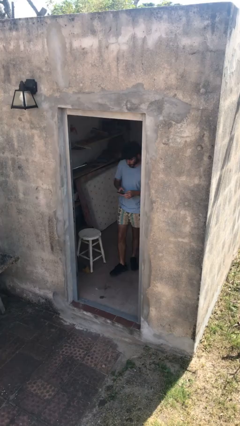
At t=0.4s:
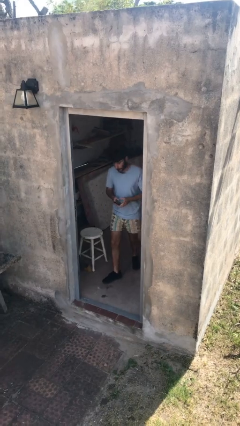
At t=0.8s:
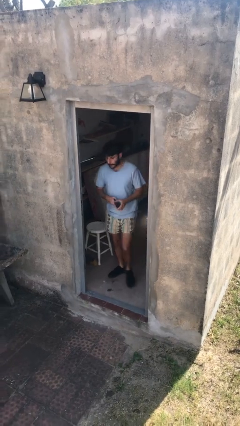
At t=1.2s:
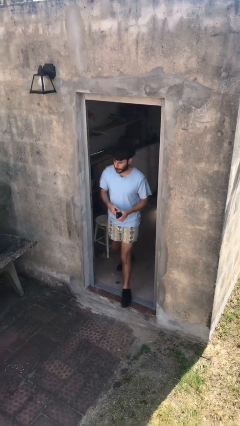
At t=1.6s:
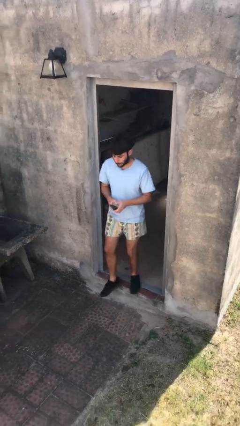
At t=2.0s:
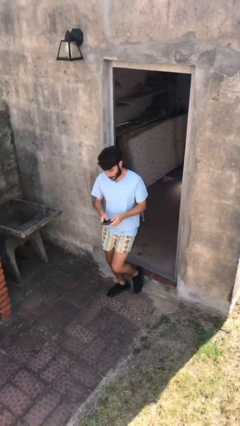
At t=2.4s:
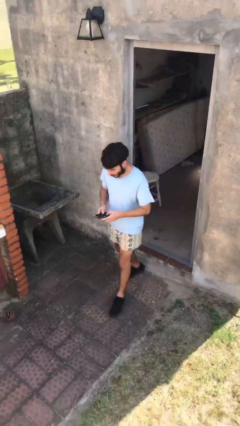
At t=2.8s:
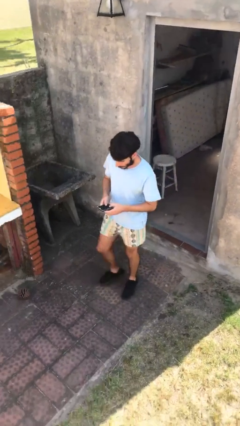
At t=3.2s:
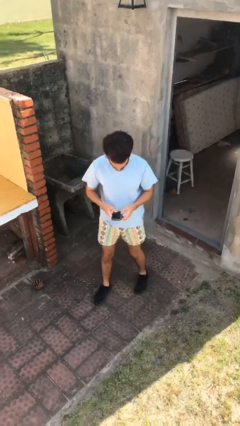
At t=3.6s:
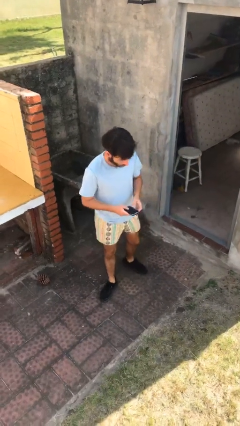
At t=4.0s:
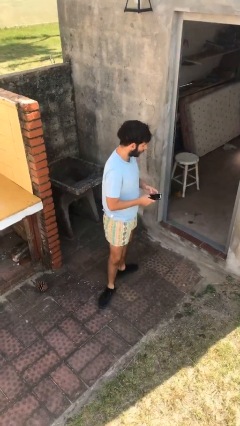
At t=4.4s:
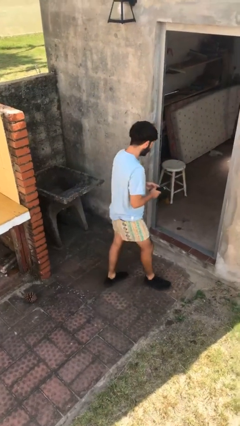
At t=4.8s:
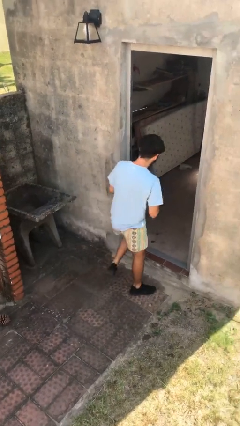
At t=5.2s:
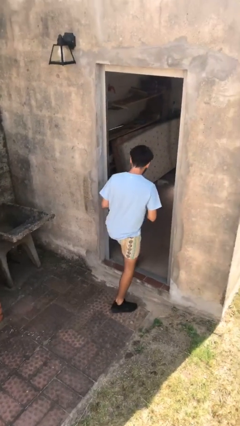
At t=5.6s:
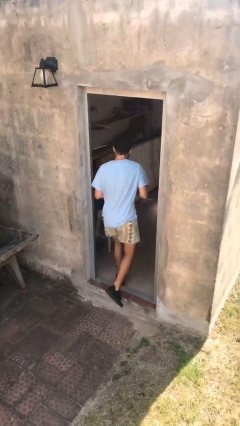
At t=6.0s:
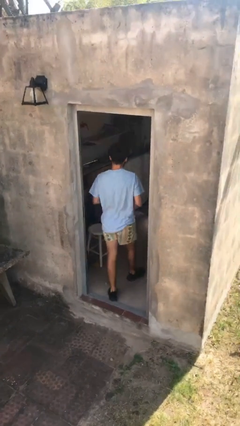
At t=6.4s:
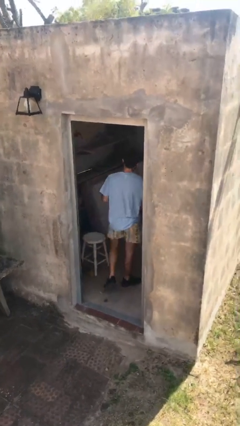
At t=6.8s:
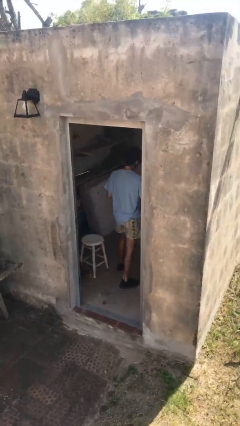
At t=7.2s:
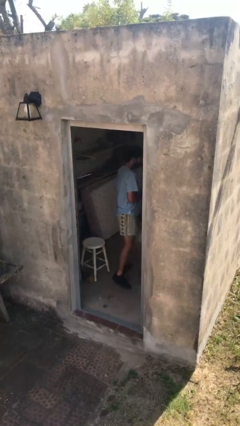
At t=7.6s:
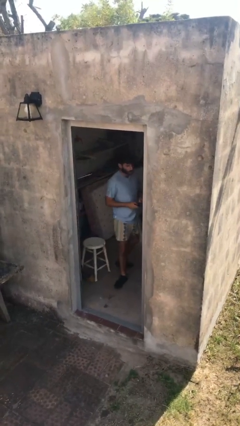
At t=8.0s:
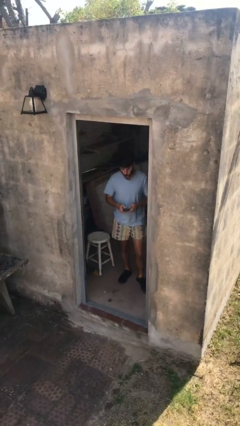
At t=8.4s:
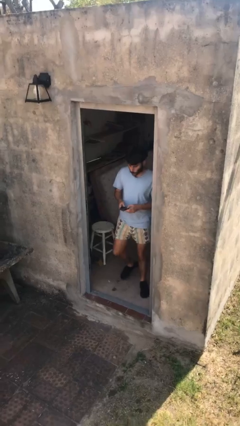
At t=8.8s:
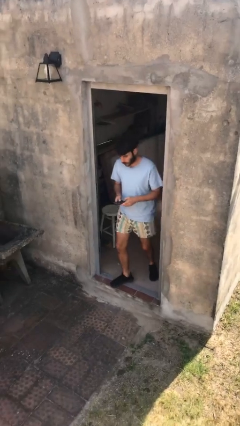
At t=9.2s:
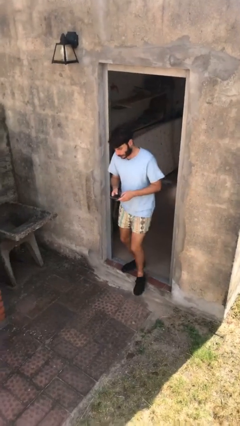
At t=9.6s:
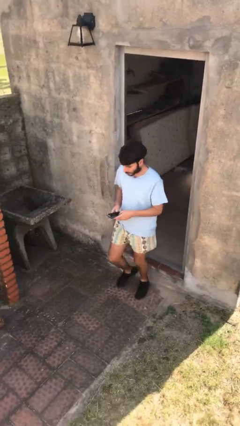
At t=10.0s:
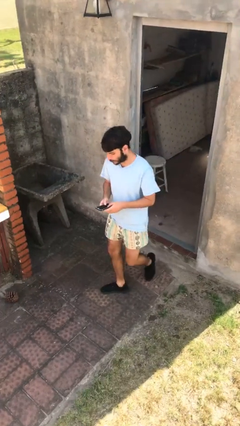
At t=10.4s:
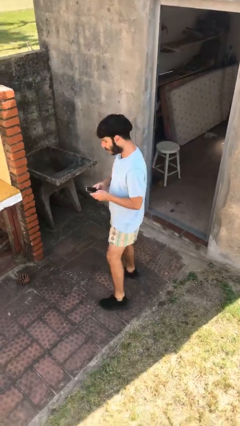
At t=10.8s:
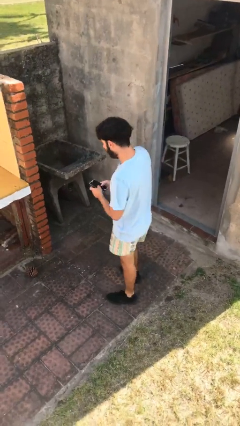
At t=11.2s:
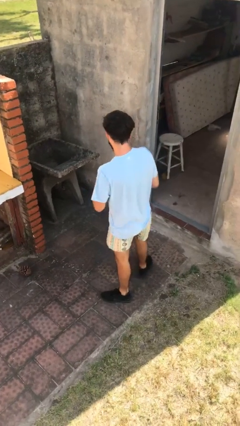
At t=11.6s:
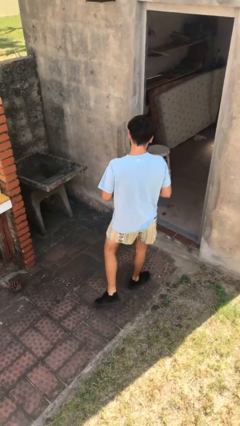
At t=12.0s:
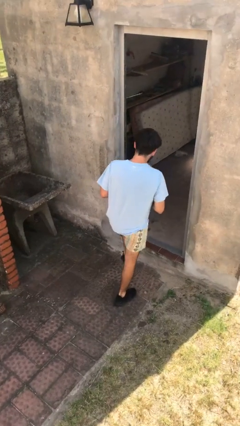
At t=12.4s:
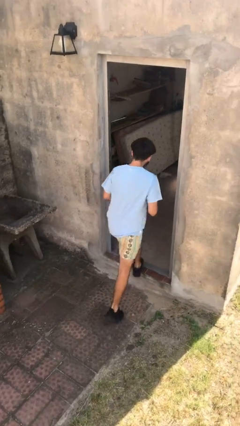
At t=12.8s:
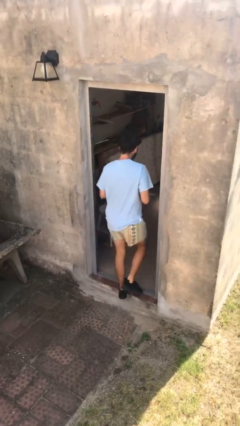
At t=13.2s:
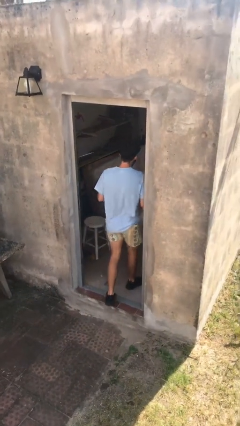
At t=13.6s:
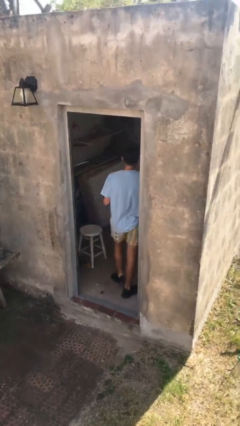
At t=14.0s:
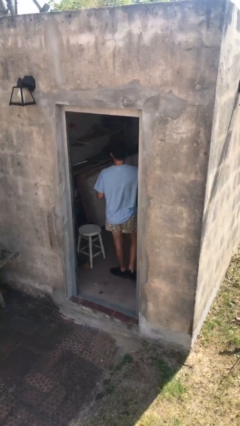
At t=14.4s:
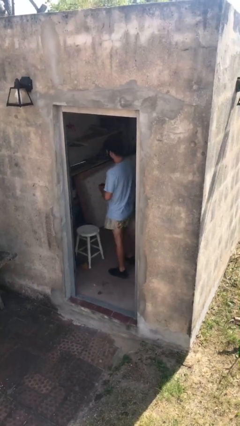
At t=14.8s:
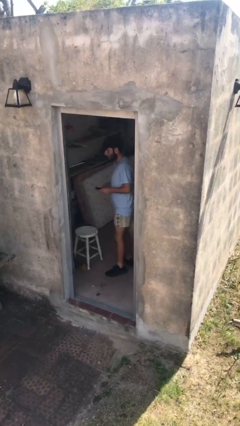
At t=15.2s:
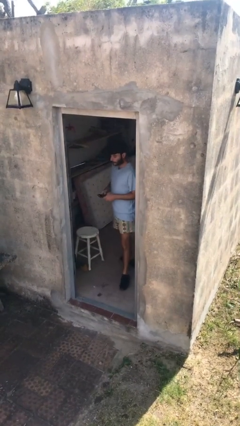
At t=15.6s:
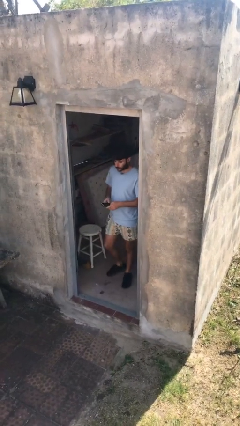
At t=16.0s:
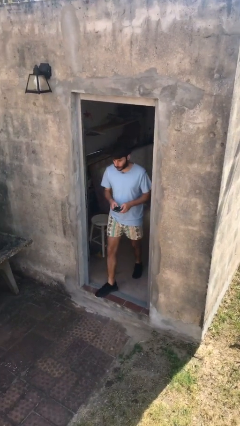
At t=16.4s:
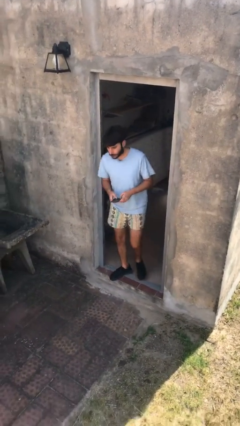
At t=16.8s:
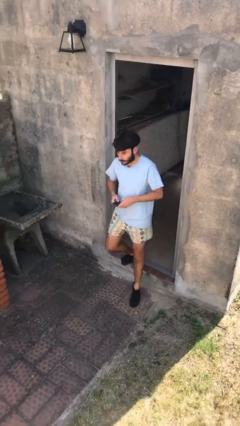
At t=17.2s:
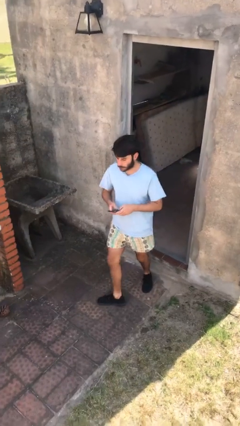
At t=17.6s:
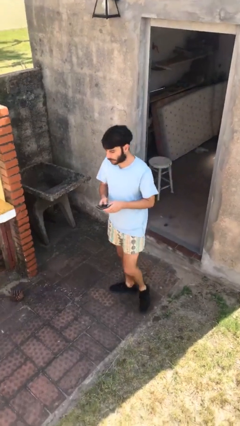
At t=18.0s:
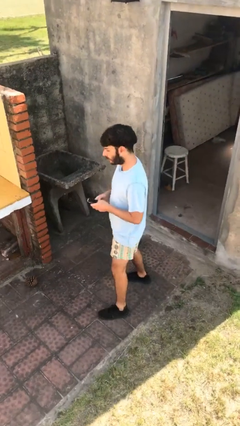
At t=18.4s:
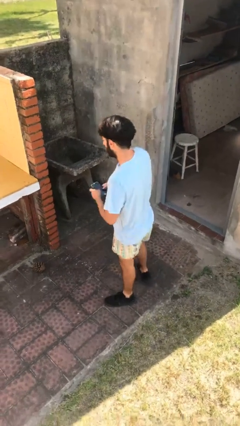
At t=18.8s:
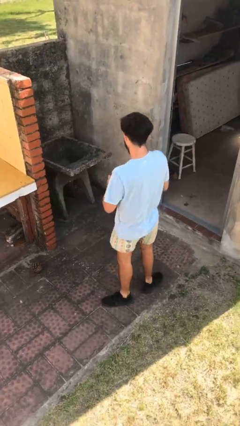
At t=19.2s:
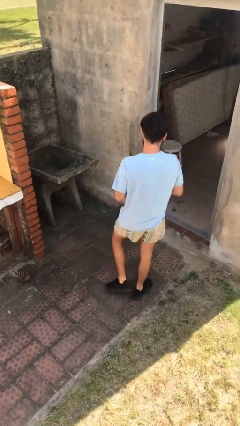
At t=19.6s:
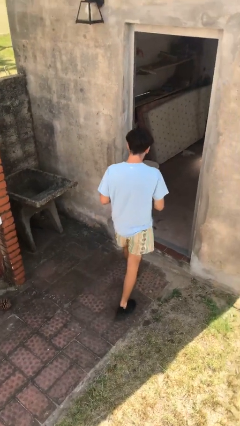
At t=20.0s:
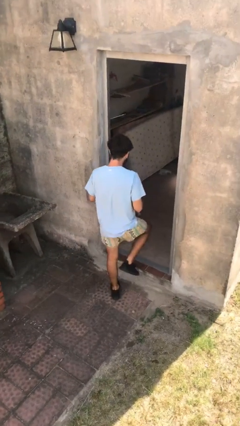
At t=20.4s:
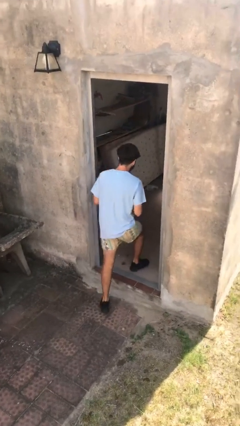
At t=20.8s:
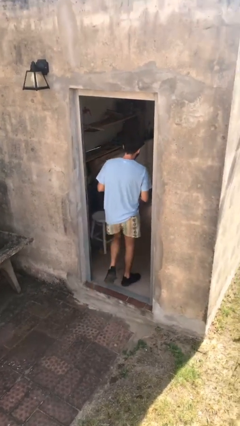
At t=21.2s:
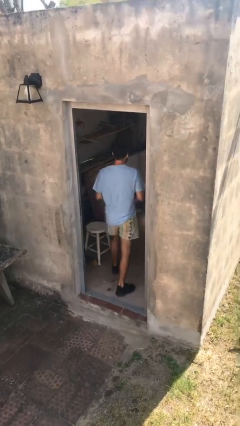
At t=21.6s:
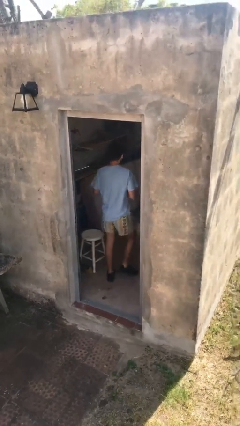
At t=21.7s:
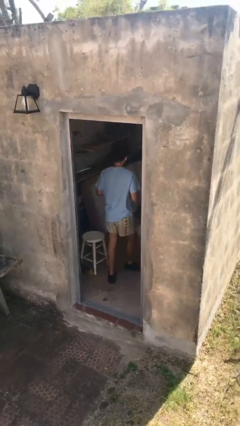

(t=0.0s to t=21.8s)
person texts on phone

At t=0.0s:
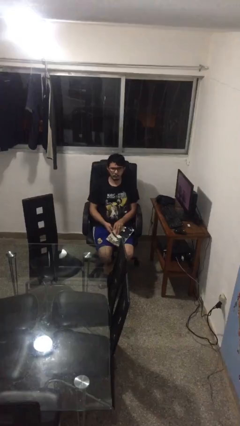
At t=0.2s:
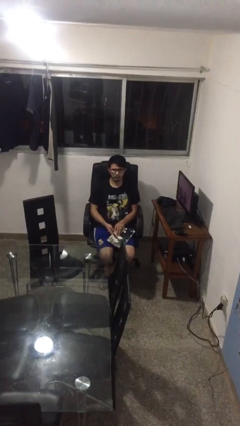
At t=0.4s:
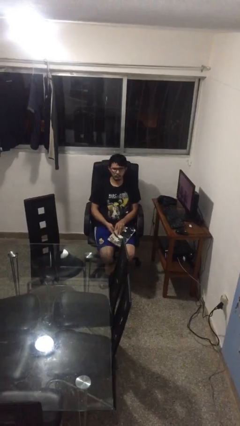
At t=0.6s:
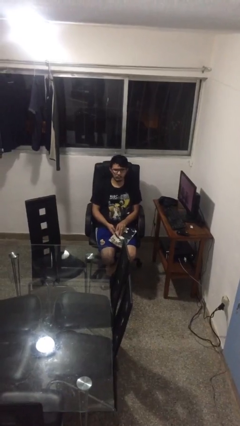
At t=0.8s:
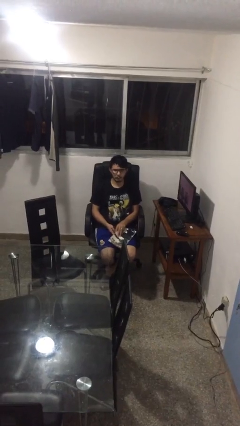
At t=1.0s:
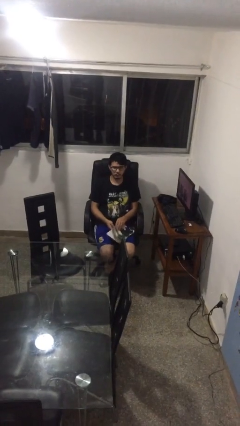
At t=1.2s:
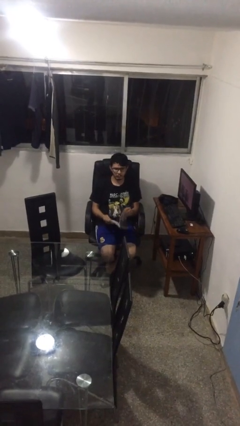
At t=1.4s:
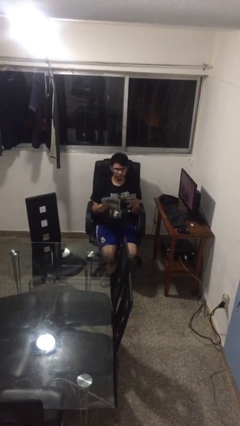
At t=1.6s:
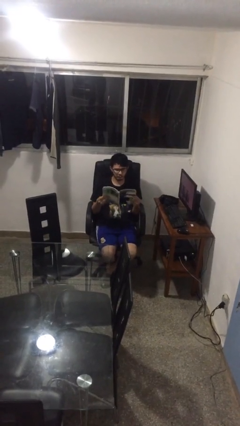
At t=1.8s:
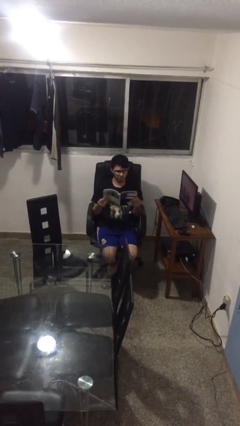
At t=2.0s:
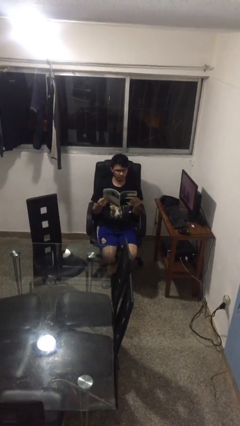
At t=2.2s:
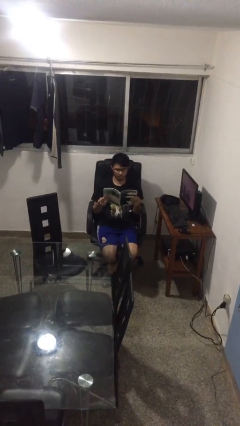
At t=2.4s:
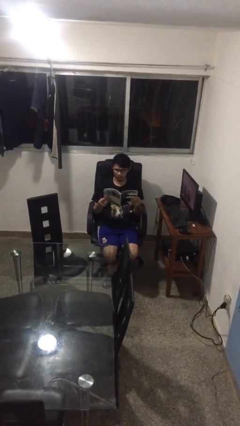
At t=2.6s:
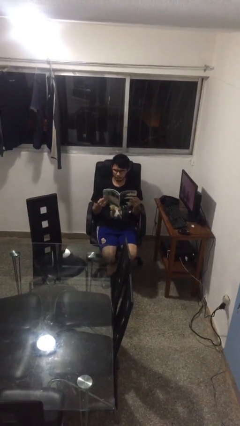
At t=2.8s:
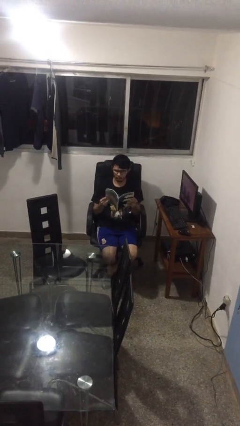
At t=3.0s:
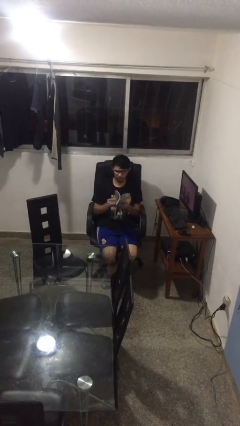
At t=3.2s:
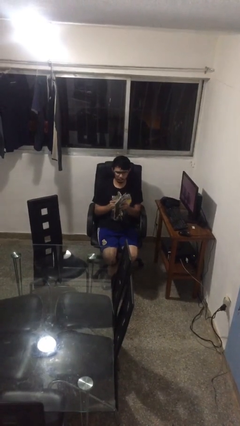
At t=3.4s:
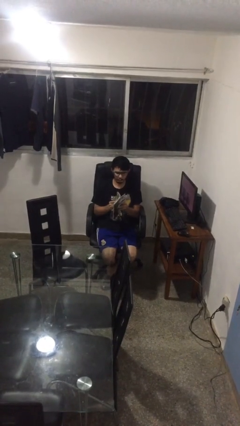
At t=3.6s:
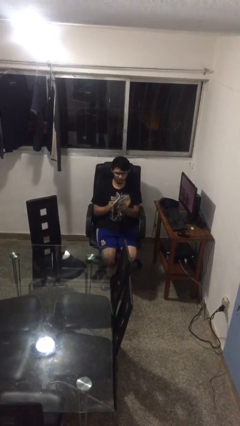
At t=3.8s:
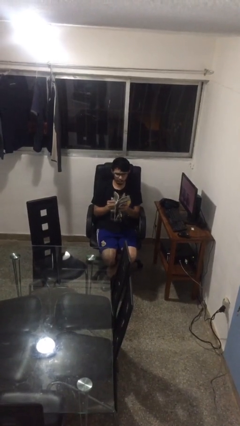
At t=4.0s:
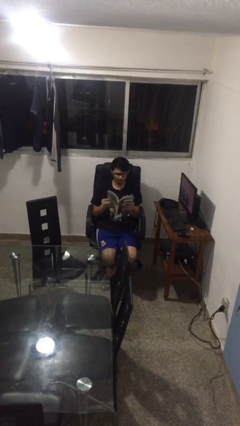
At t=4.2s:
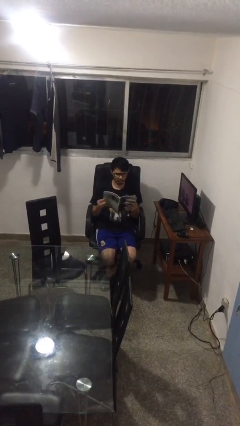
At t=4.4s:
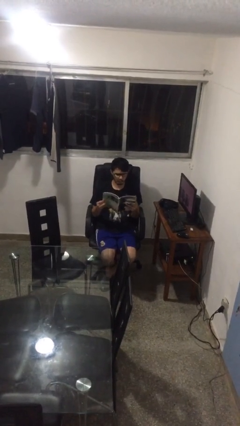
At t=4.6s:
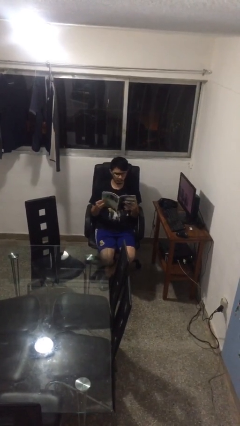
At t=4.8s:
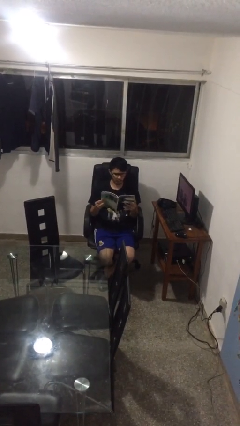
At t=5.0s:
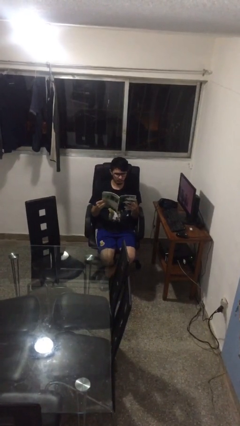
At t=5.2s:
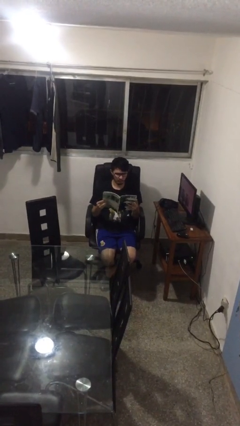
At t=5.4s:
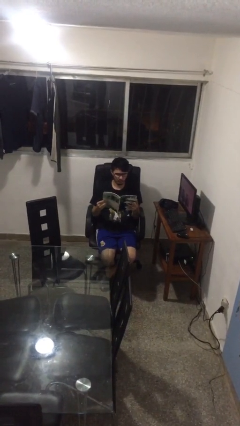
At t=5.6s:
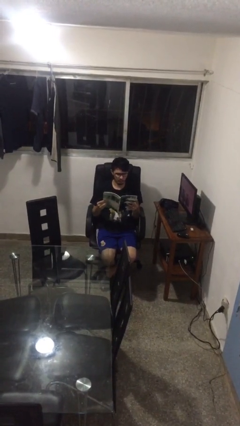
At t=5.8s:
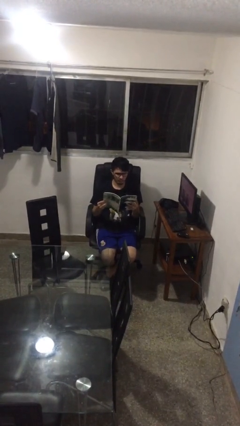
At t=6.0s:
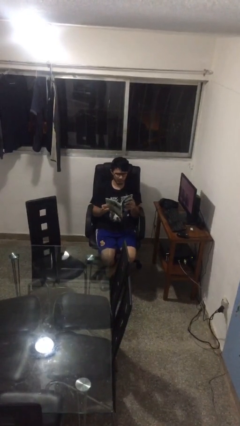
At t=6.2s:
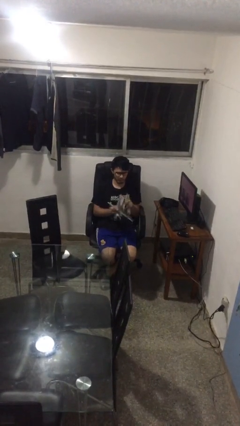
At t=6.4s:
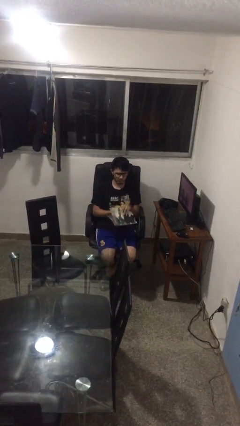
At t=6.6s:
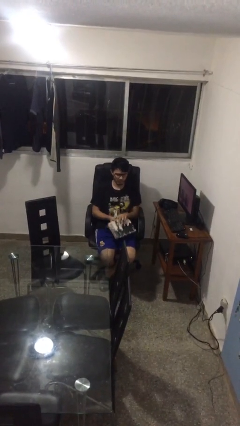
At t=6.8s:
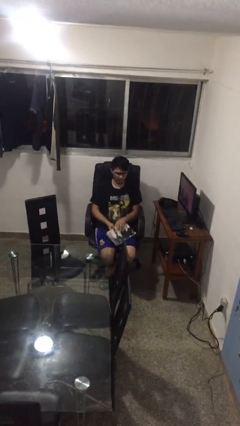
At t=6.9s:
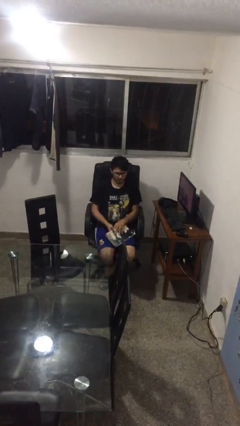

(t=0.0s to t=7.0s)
person reads magazine
